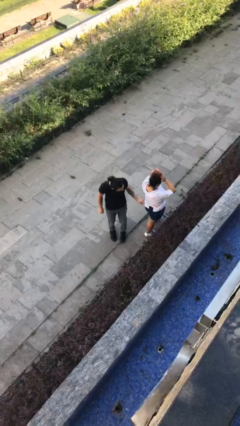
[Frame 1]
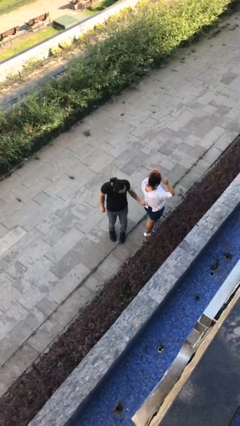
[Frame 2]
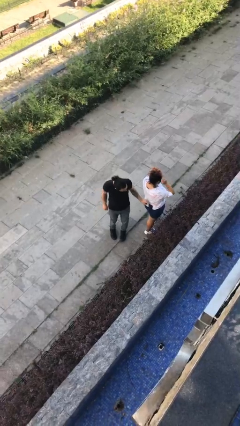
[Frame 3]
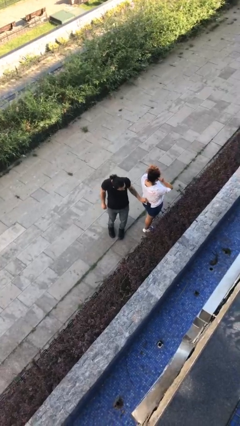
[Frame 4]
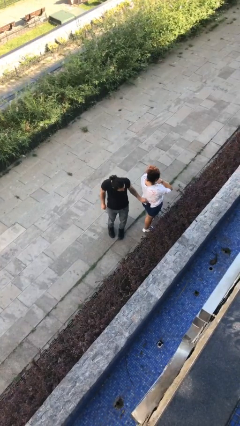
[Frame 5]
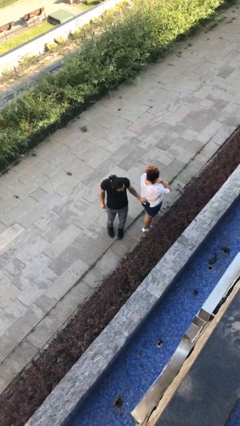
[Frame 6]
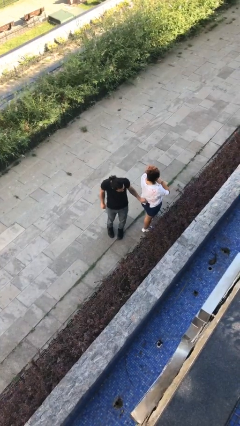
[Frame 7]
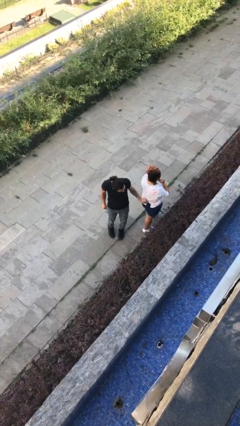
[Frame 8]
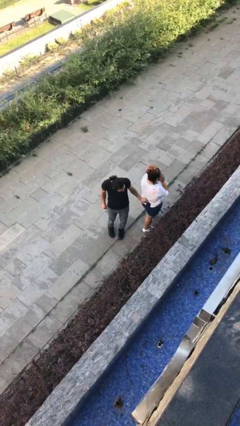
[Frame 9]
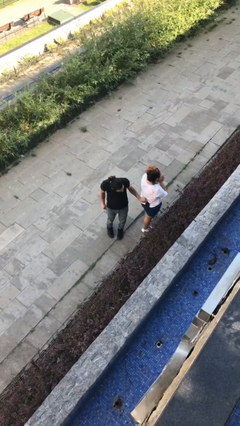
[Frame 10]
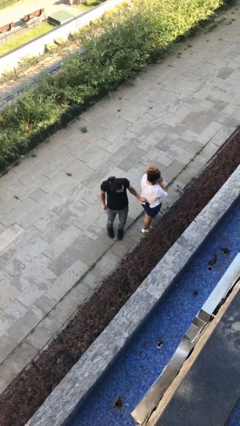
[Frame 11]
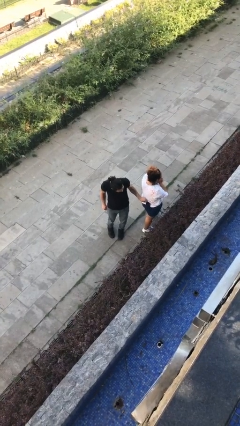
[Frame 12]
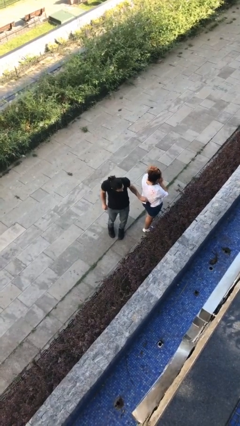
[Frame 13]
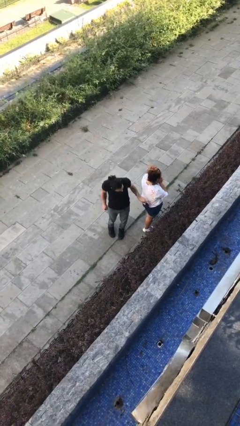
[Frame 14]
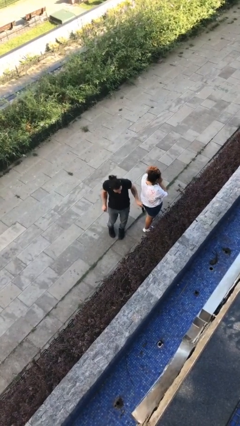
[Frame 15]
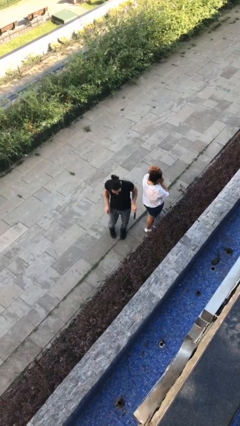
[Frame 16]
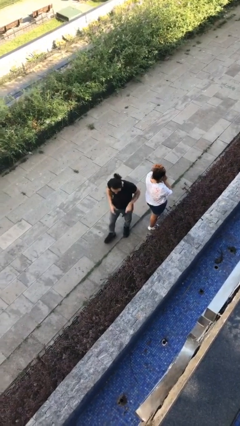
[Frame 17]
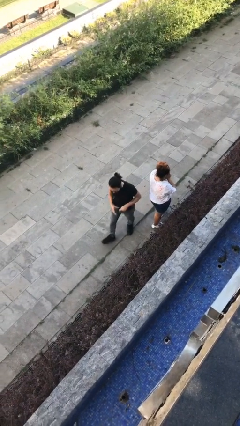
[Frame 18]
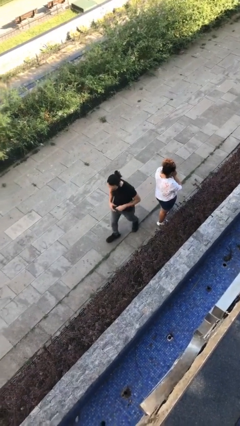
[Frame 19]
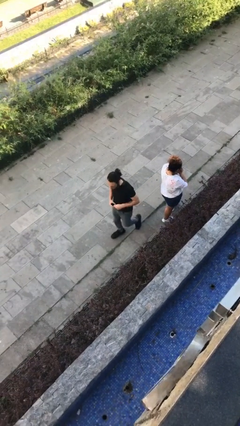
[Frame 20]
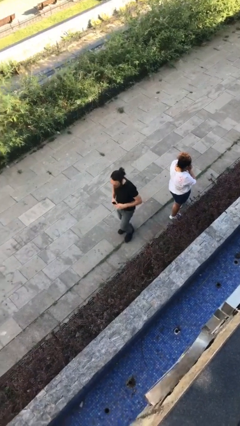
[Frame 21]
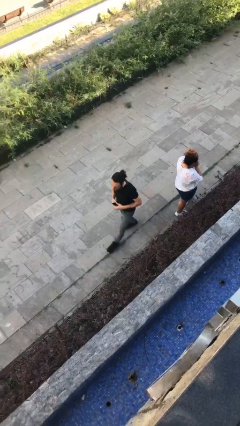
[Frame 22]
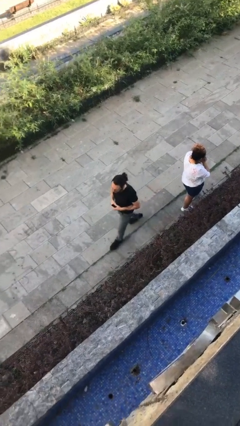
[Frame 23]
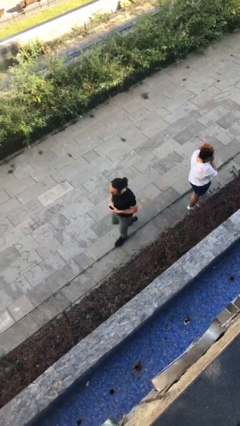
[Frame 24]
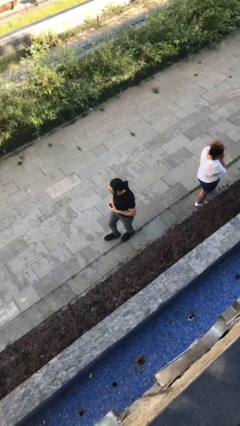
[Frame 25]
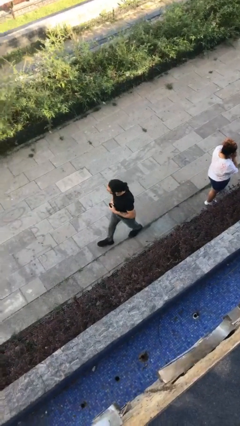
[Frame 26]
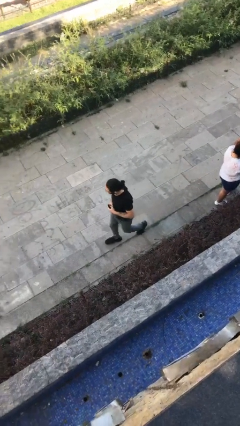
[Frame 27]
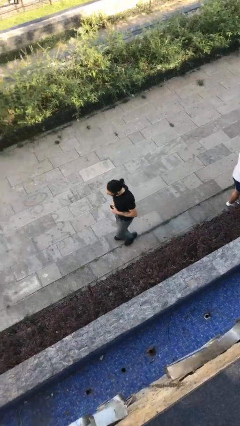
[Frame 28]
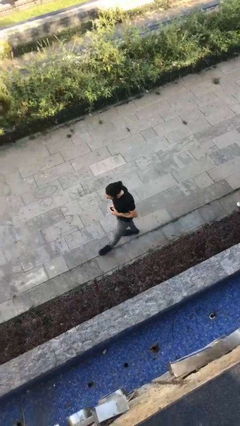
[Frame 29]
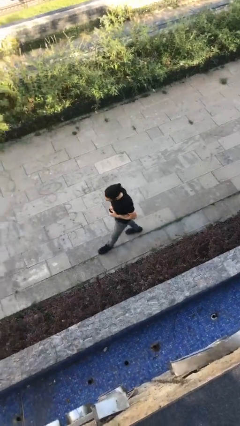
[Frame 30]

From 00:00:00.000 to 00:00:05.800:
person steals object from person

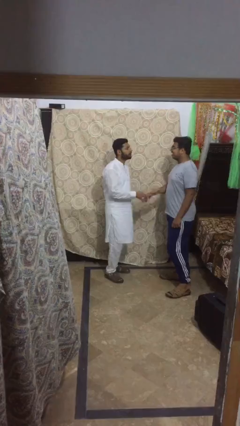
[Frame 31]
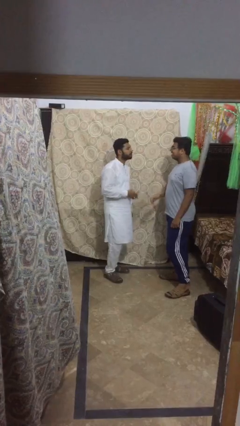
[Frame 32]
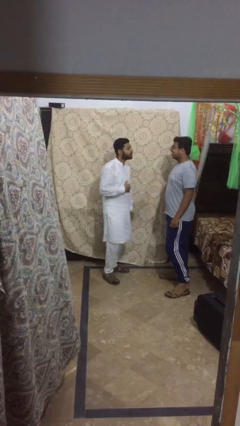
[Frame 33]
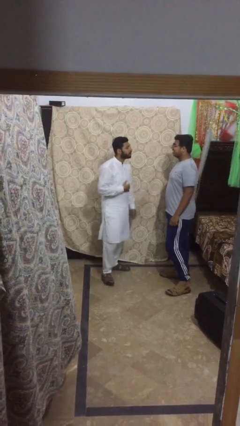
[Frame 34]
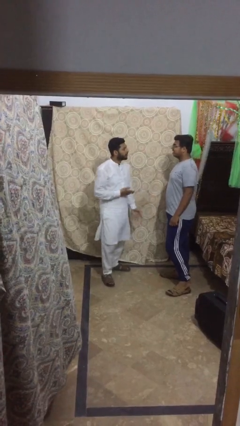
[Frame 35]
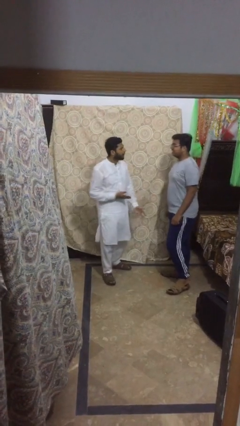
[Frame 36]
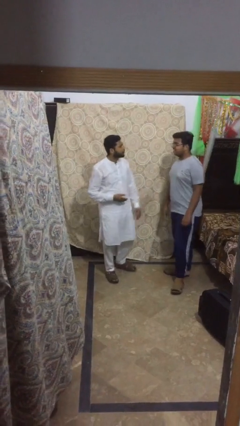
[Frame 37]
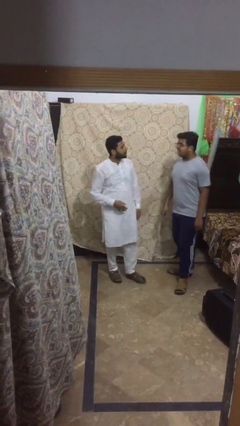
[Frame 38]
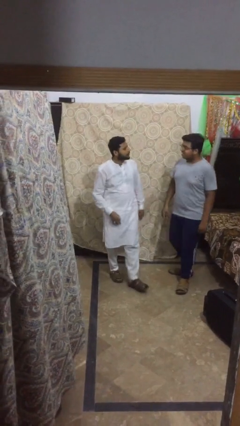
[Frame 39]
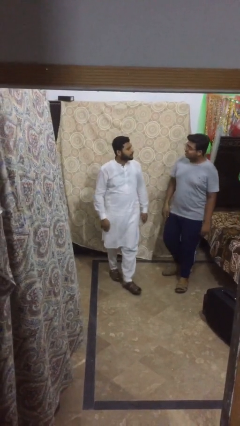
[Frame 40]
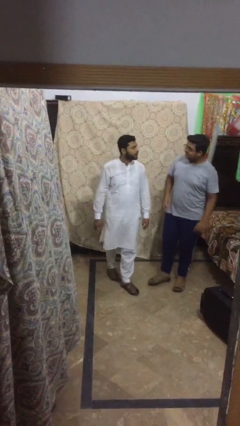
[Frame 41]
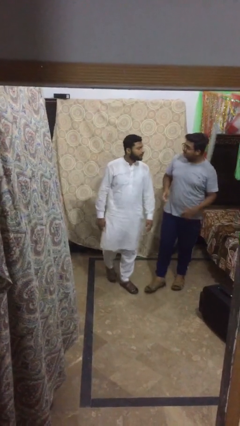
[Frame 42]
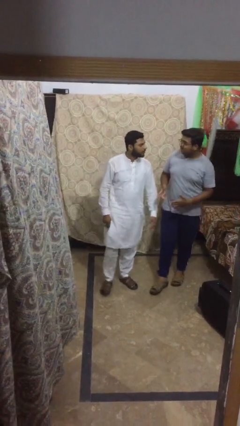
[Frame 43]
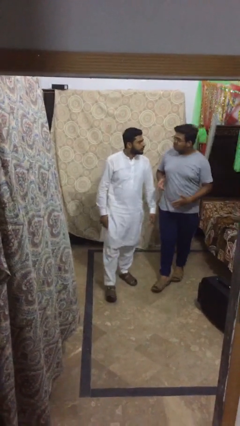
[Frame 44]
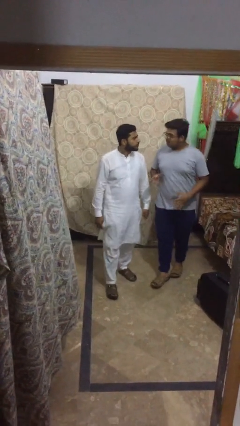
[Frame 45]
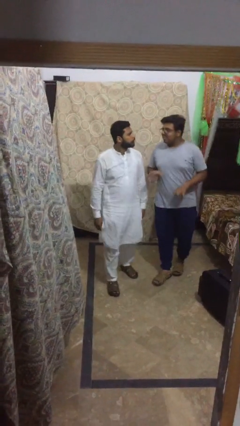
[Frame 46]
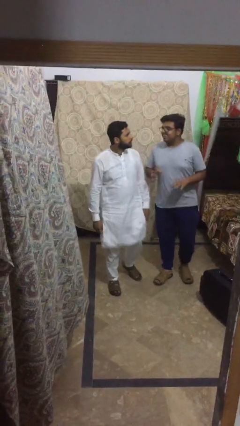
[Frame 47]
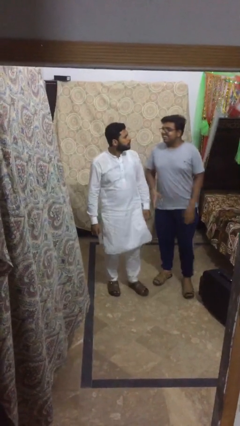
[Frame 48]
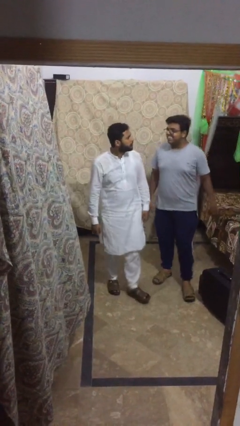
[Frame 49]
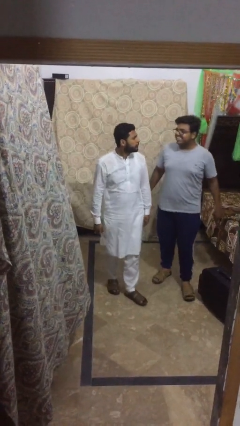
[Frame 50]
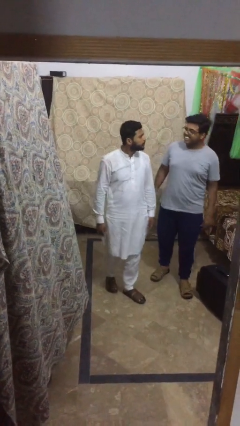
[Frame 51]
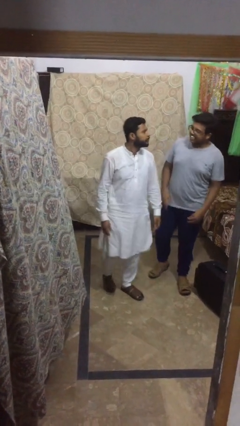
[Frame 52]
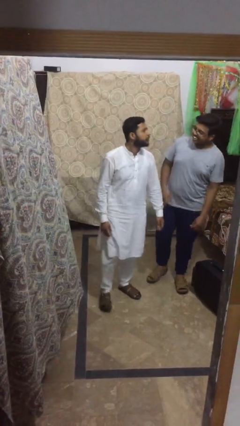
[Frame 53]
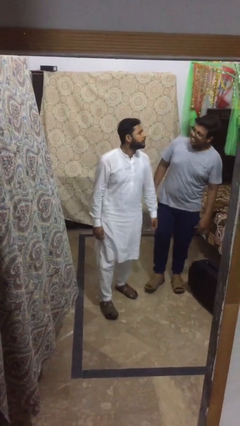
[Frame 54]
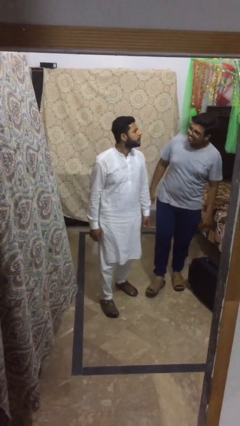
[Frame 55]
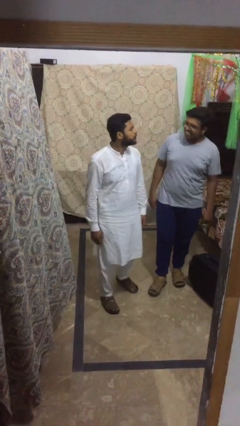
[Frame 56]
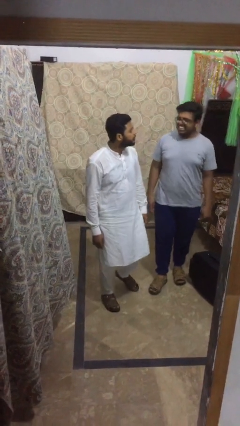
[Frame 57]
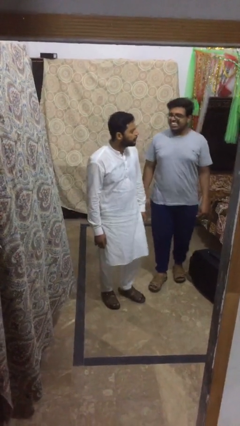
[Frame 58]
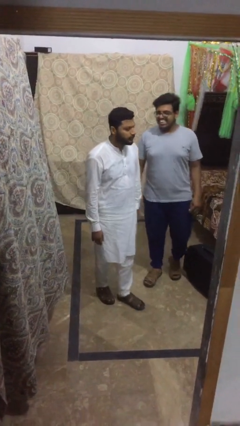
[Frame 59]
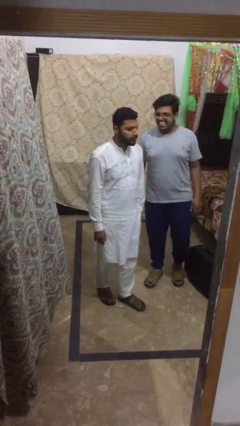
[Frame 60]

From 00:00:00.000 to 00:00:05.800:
person talks to person

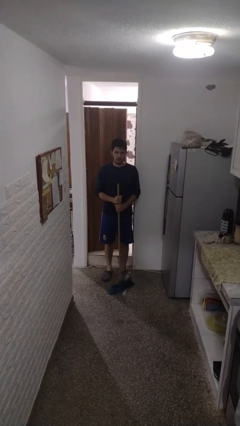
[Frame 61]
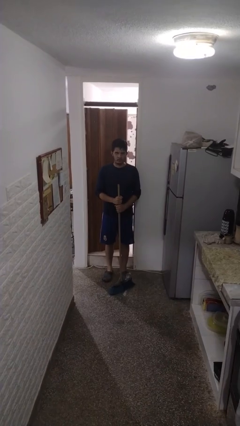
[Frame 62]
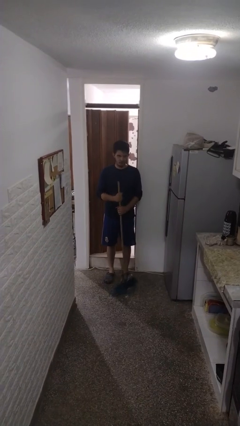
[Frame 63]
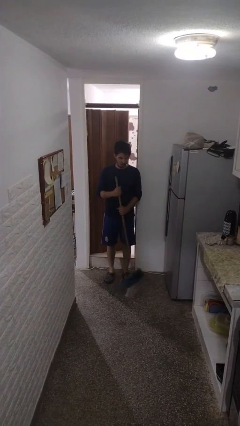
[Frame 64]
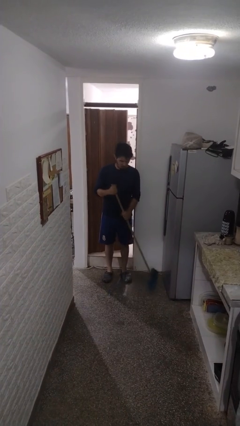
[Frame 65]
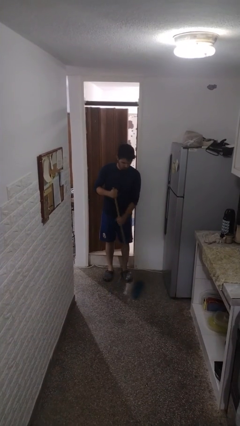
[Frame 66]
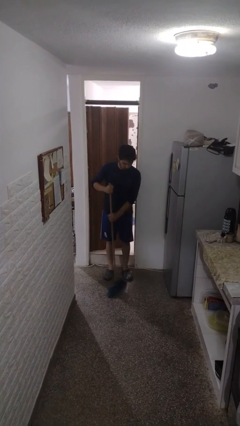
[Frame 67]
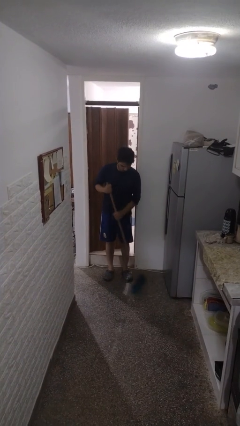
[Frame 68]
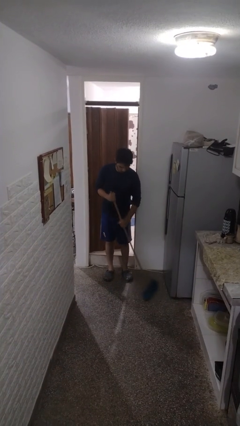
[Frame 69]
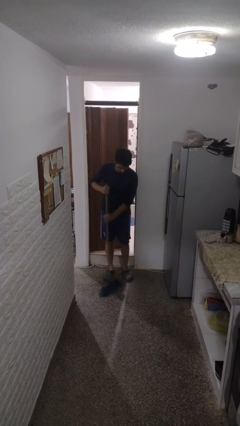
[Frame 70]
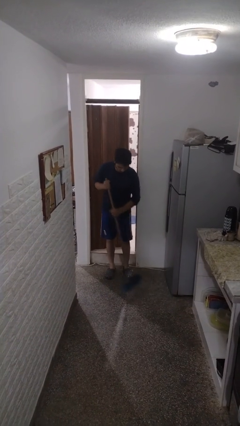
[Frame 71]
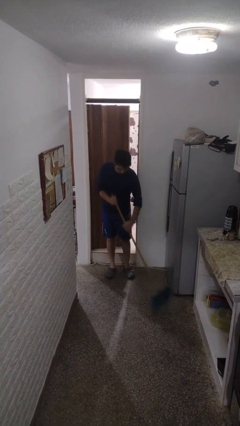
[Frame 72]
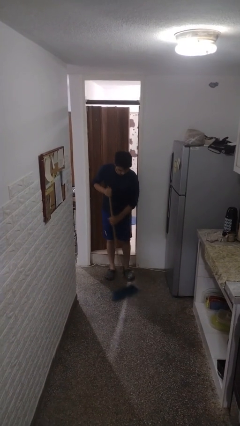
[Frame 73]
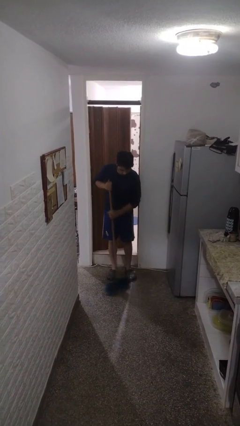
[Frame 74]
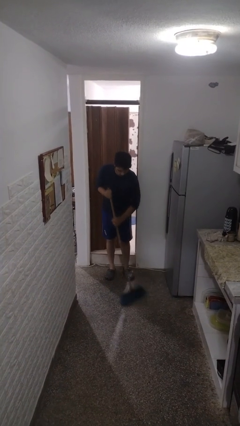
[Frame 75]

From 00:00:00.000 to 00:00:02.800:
person sweeps floor

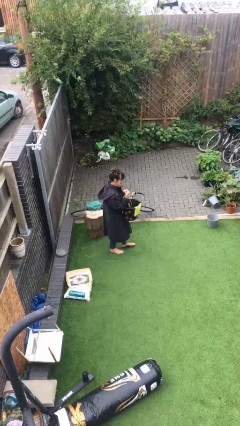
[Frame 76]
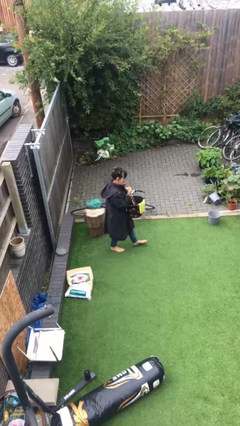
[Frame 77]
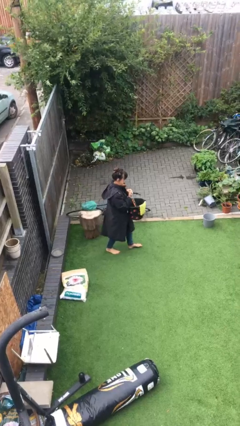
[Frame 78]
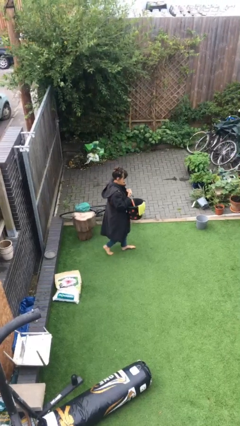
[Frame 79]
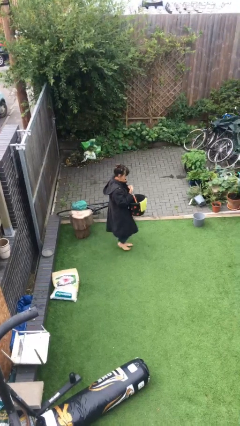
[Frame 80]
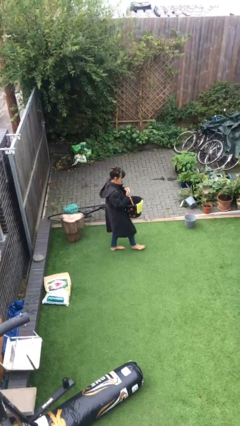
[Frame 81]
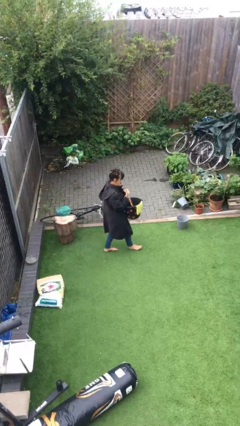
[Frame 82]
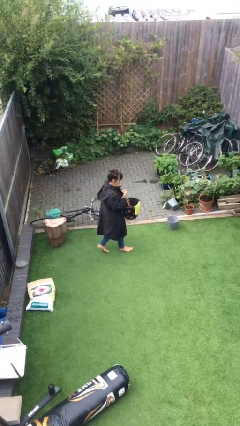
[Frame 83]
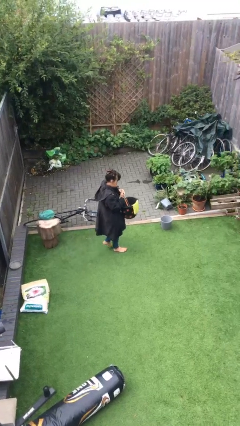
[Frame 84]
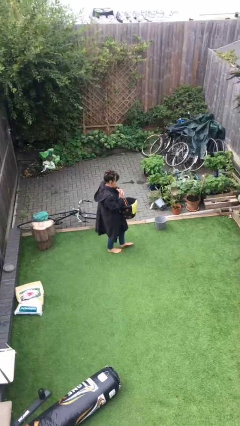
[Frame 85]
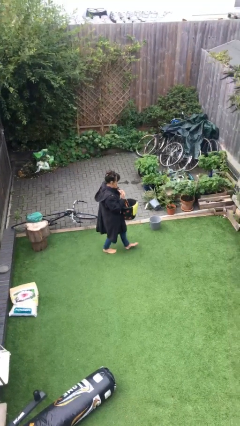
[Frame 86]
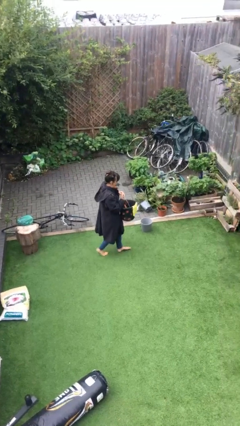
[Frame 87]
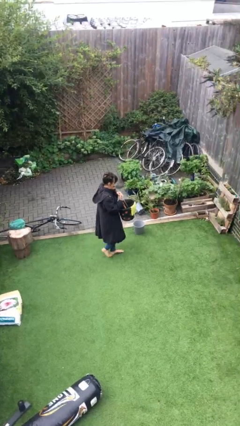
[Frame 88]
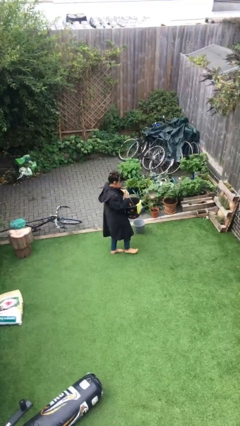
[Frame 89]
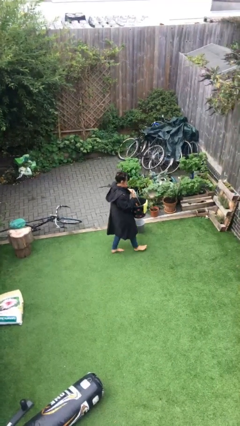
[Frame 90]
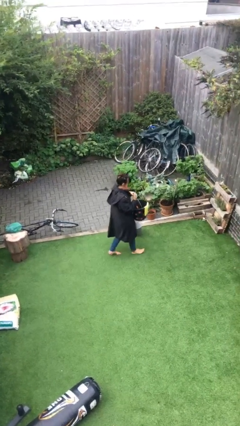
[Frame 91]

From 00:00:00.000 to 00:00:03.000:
person carries heavy object
